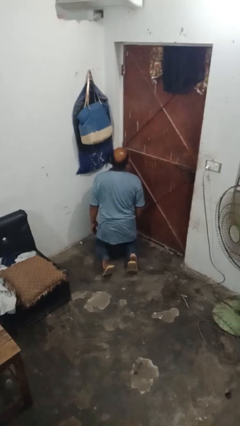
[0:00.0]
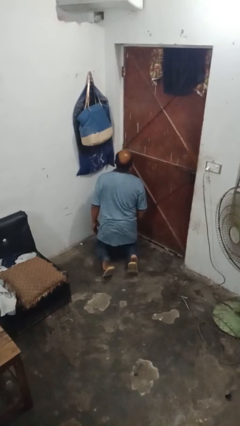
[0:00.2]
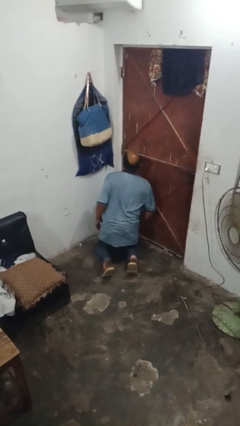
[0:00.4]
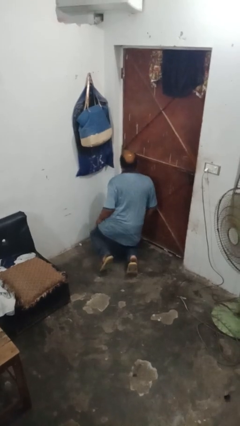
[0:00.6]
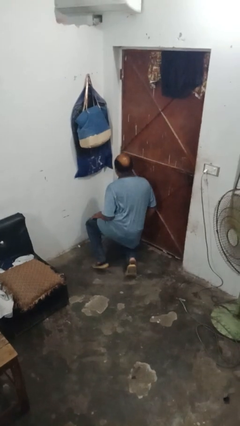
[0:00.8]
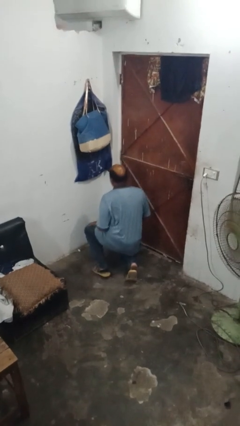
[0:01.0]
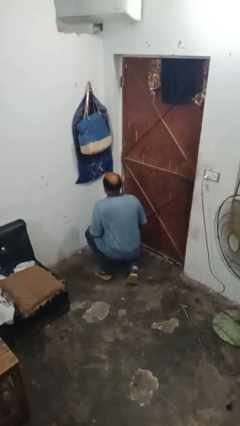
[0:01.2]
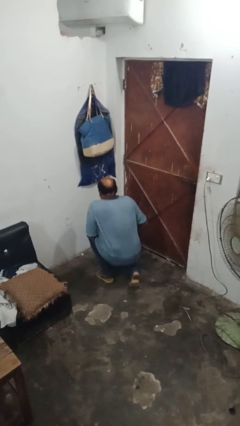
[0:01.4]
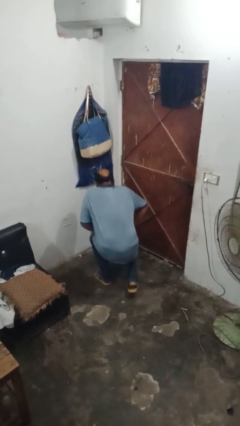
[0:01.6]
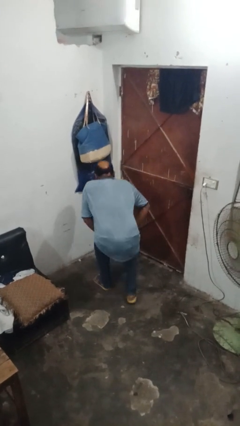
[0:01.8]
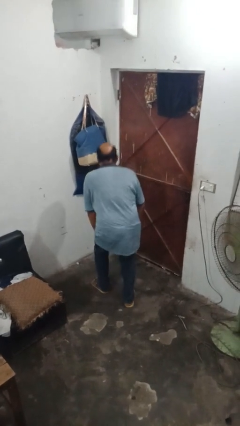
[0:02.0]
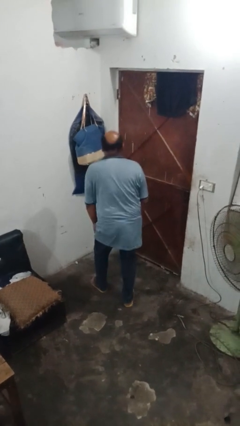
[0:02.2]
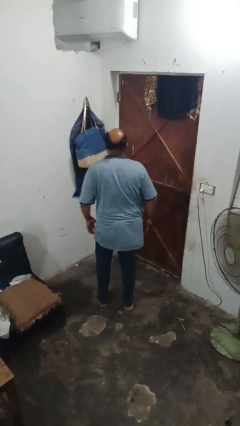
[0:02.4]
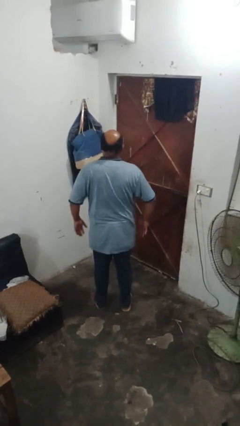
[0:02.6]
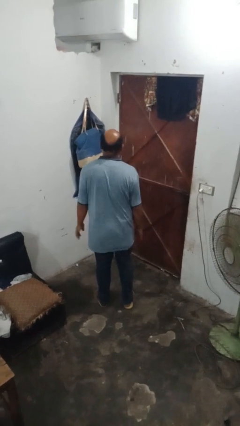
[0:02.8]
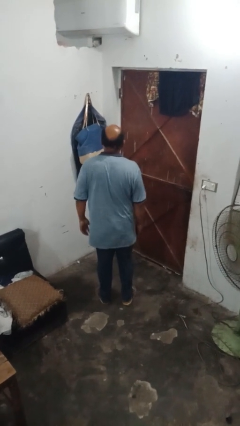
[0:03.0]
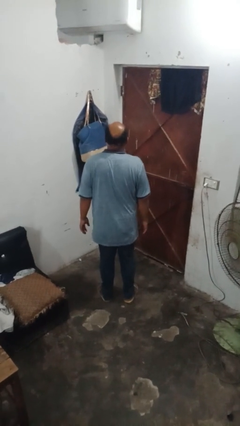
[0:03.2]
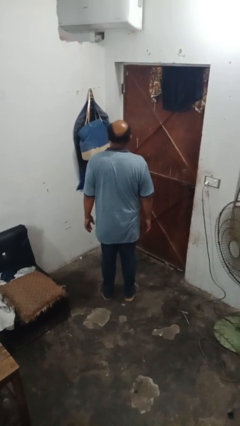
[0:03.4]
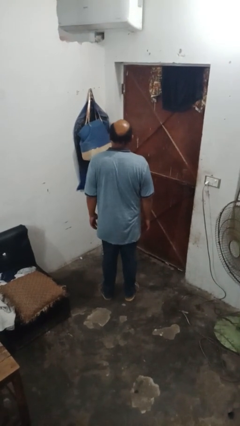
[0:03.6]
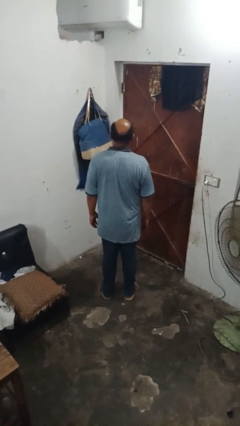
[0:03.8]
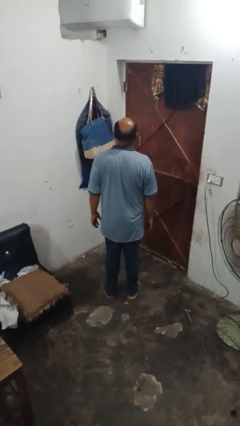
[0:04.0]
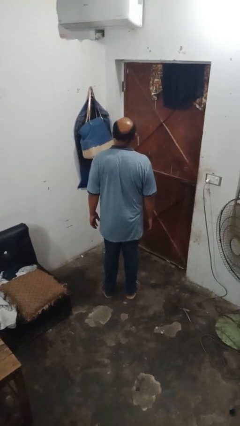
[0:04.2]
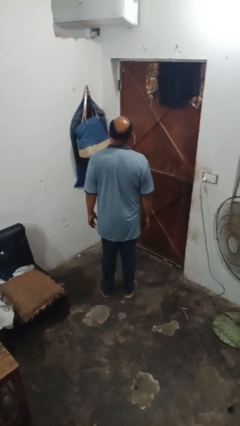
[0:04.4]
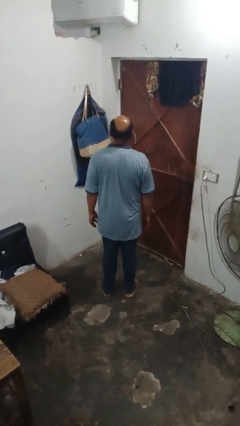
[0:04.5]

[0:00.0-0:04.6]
person stands up

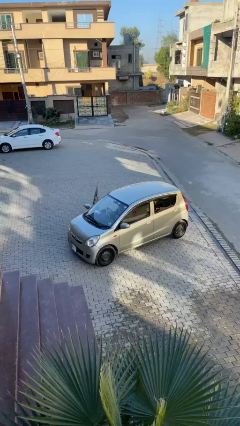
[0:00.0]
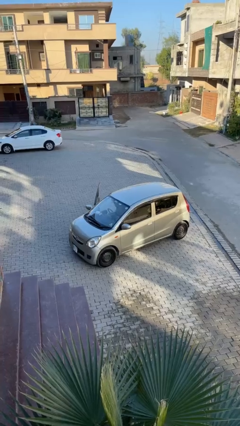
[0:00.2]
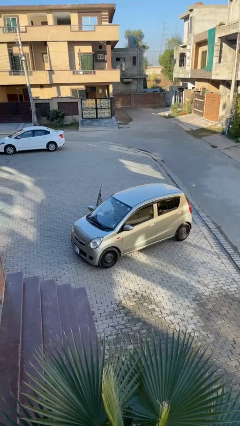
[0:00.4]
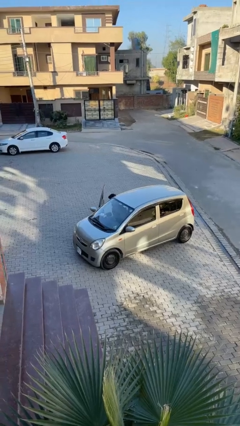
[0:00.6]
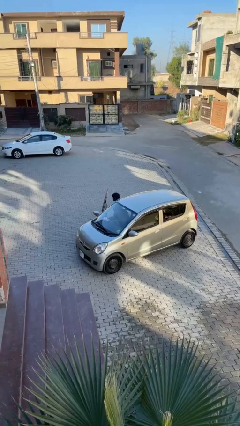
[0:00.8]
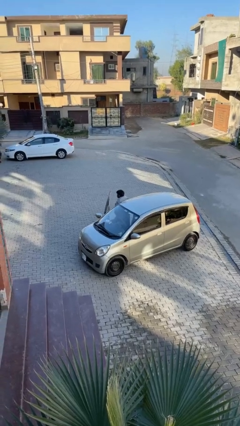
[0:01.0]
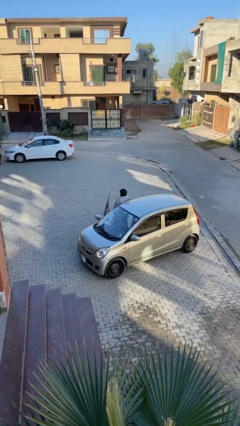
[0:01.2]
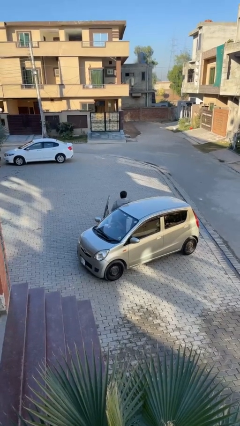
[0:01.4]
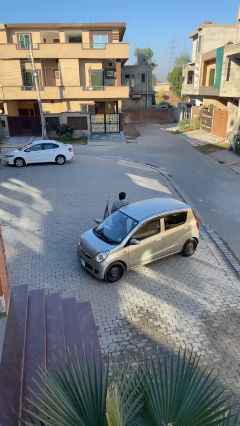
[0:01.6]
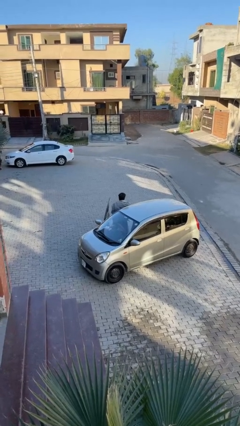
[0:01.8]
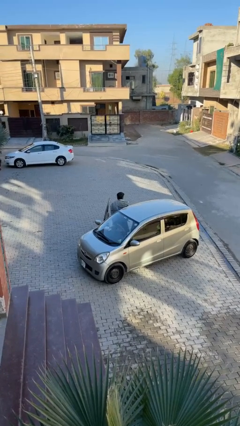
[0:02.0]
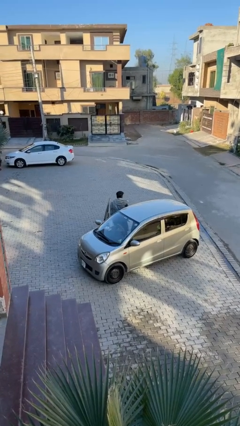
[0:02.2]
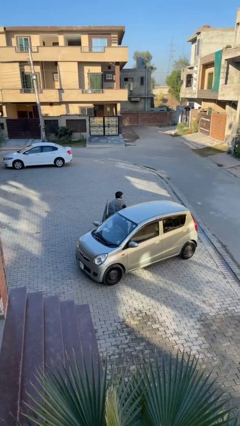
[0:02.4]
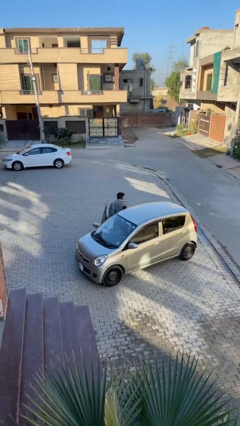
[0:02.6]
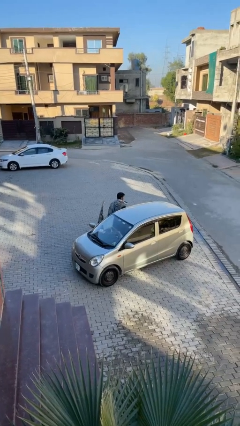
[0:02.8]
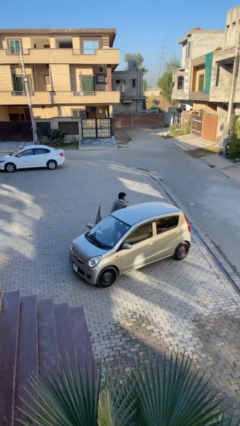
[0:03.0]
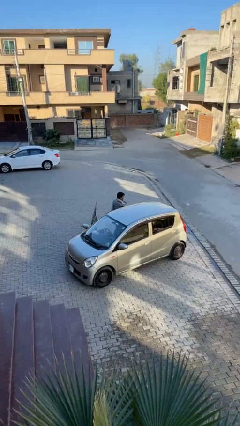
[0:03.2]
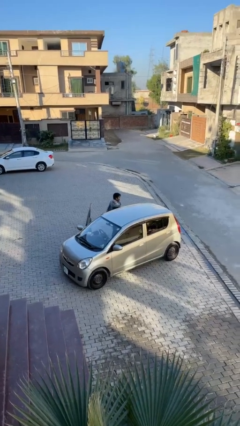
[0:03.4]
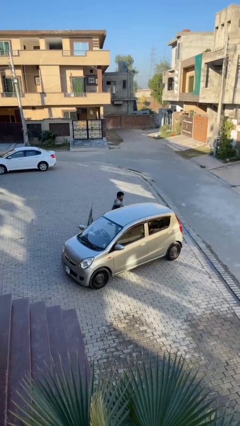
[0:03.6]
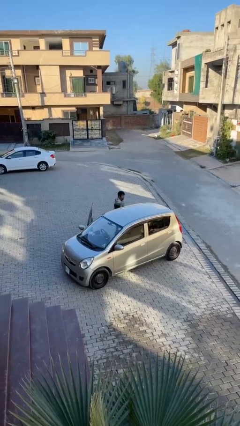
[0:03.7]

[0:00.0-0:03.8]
person exits car

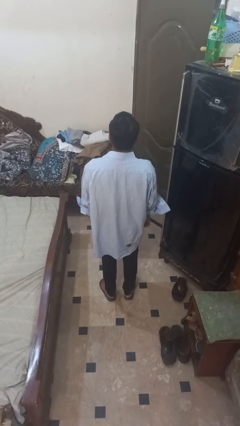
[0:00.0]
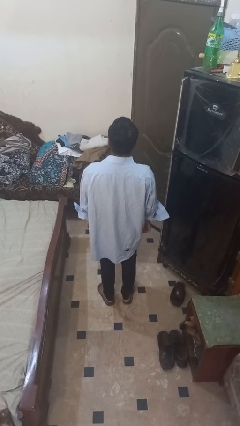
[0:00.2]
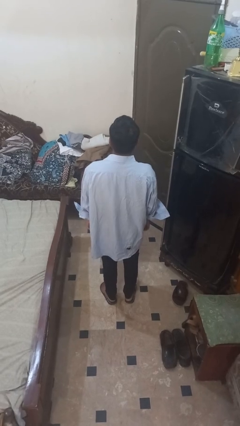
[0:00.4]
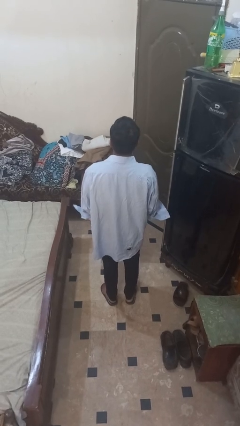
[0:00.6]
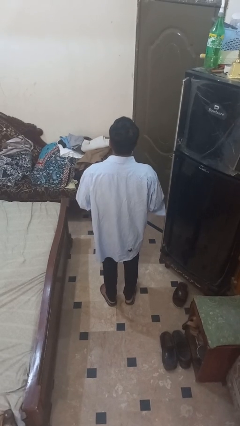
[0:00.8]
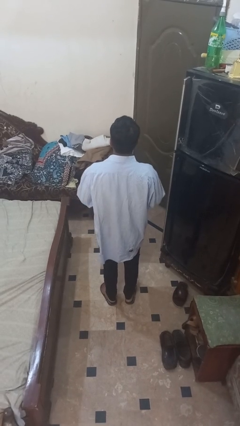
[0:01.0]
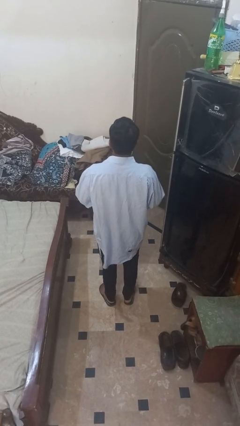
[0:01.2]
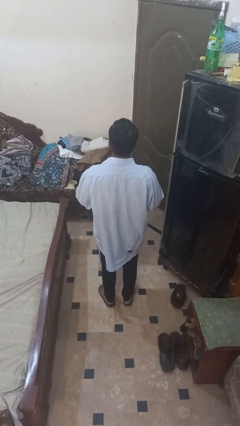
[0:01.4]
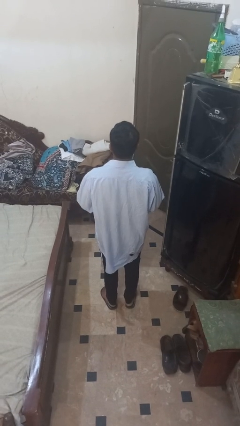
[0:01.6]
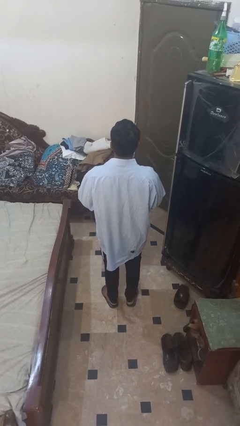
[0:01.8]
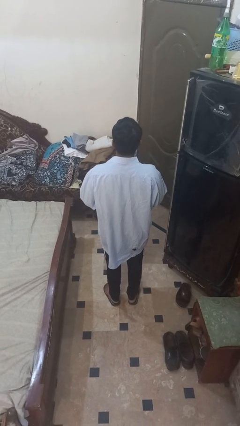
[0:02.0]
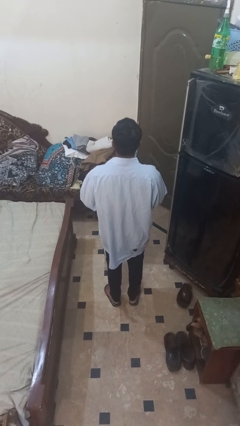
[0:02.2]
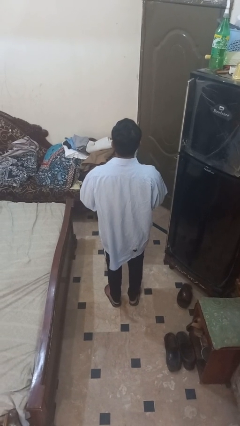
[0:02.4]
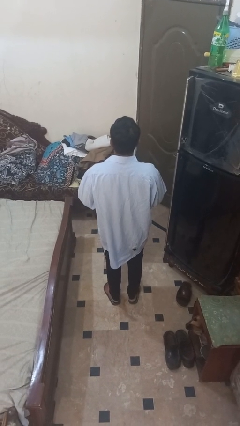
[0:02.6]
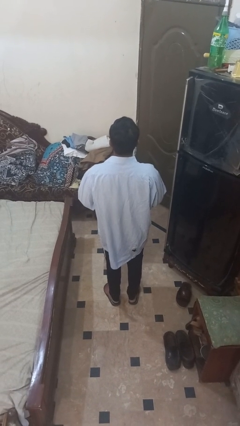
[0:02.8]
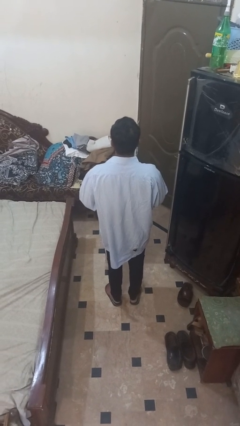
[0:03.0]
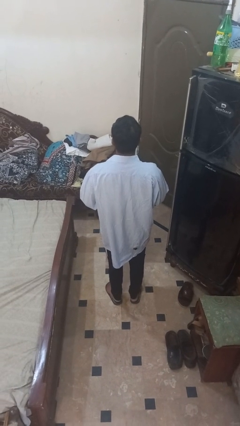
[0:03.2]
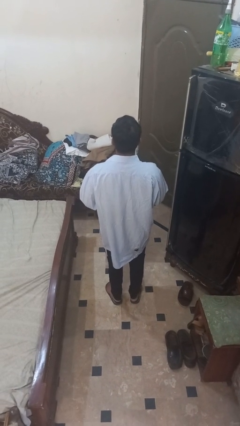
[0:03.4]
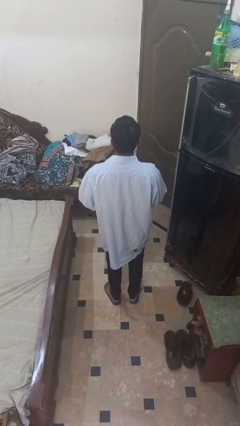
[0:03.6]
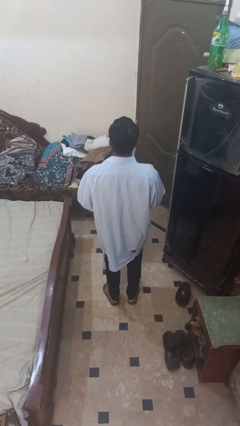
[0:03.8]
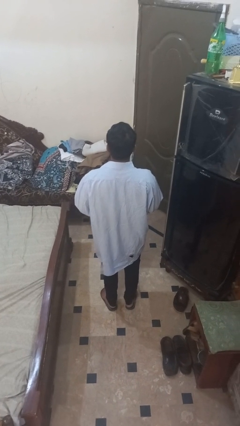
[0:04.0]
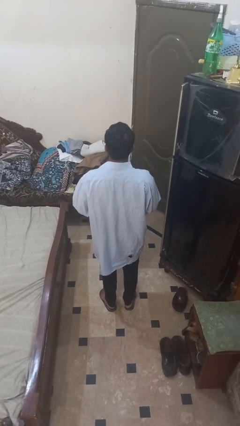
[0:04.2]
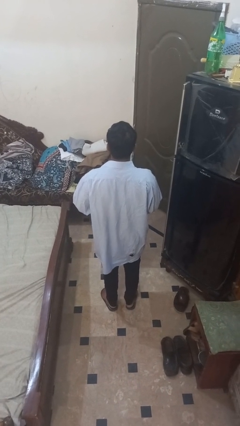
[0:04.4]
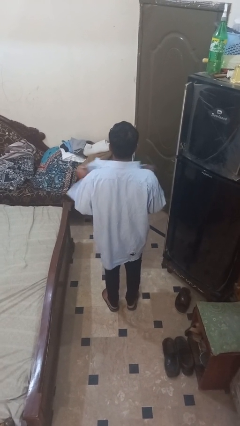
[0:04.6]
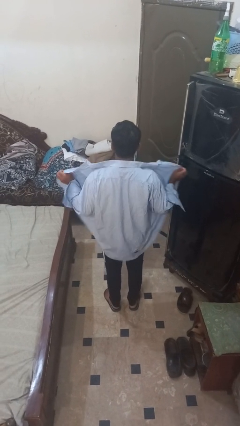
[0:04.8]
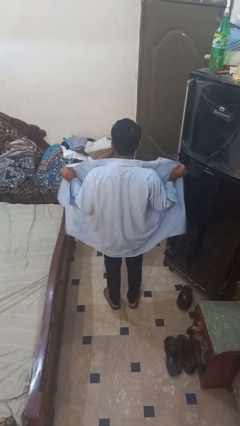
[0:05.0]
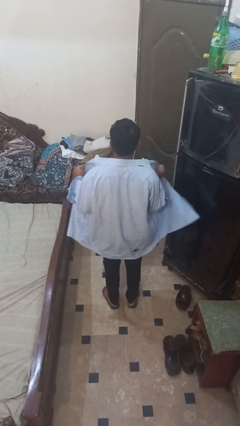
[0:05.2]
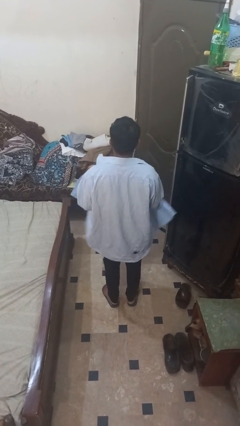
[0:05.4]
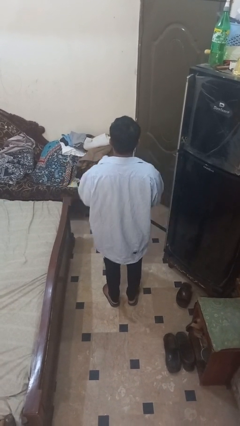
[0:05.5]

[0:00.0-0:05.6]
person unbuttons shirt

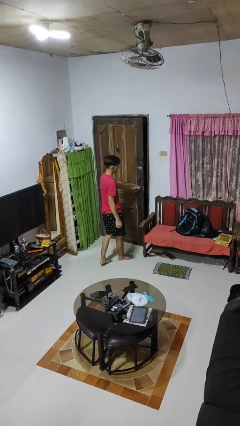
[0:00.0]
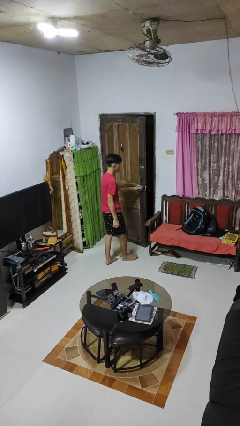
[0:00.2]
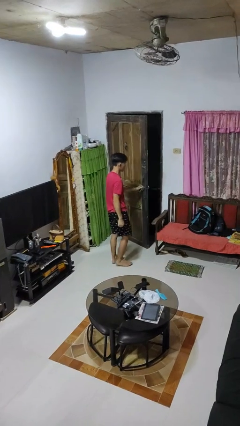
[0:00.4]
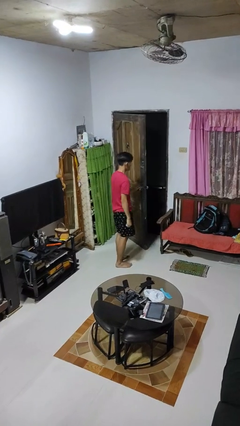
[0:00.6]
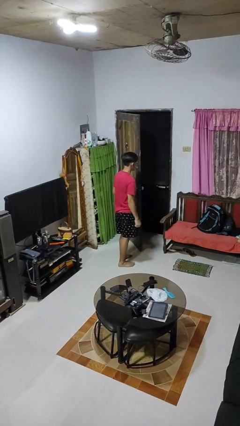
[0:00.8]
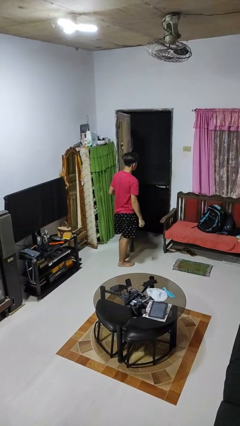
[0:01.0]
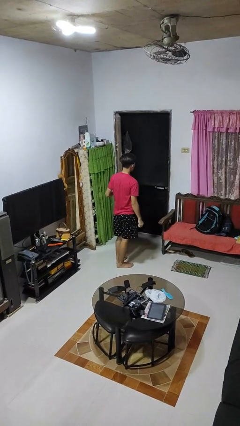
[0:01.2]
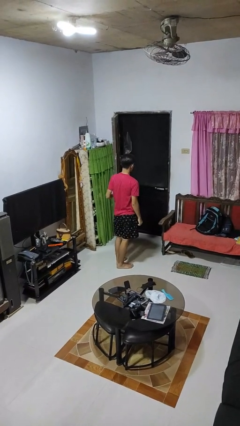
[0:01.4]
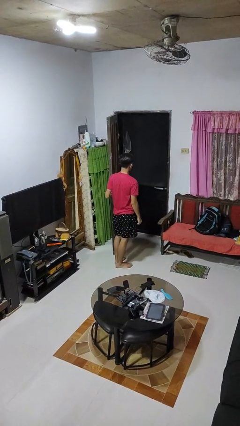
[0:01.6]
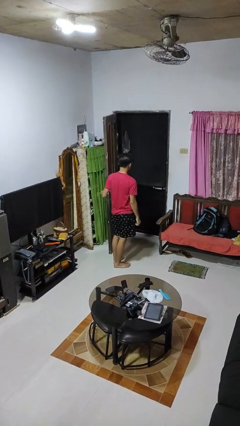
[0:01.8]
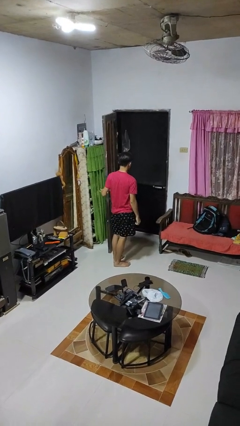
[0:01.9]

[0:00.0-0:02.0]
person opens facility door

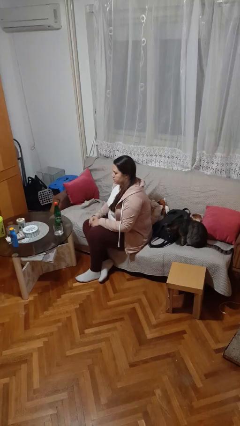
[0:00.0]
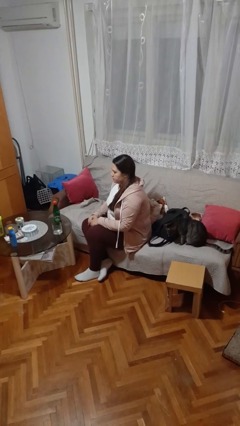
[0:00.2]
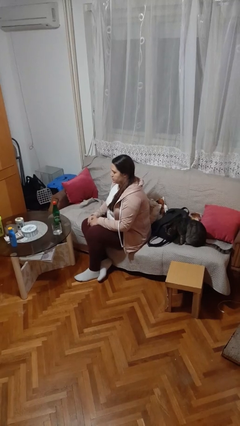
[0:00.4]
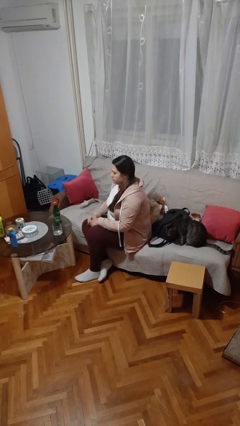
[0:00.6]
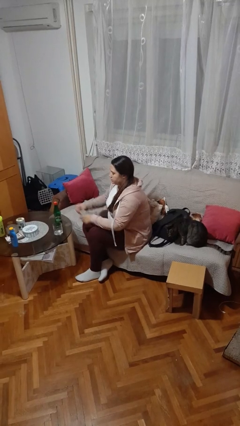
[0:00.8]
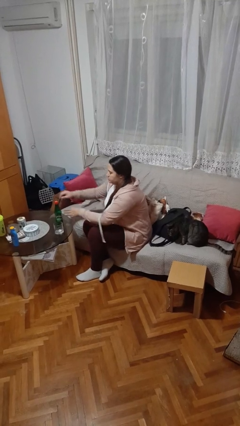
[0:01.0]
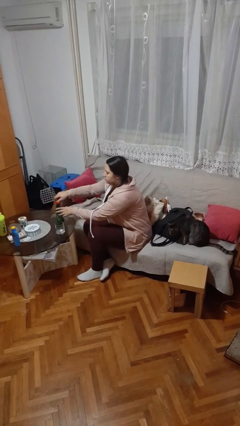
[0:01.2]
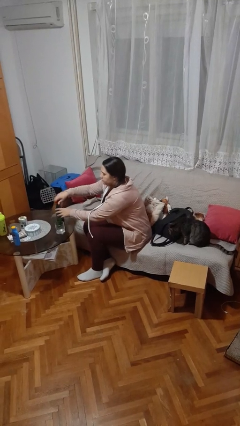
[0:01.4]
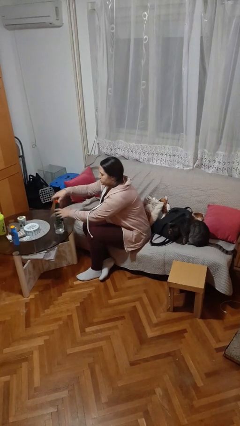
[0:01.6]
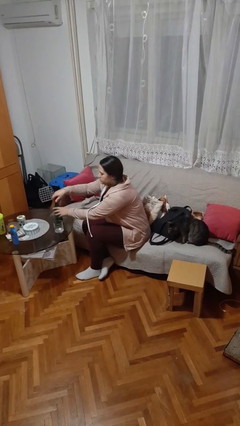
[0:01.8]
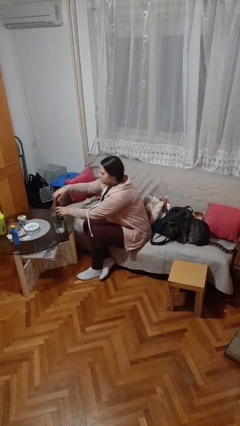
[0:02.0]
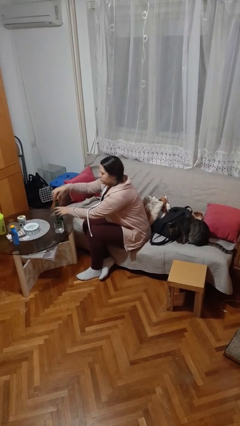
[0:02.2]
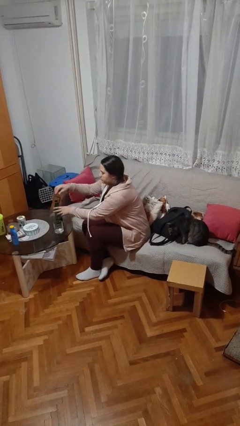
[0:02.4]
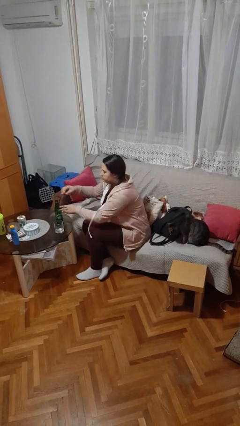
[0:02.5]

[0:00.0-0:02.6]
person unscrews lid from bottle
